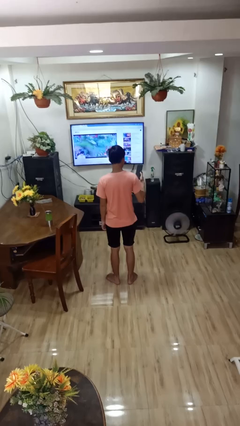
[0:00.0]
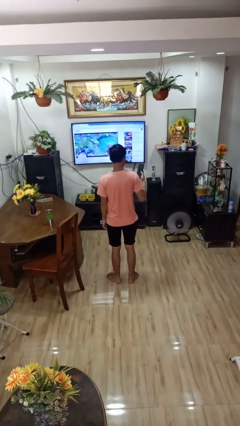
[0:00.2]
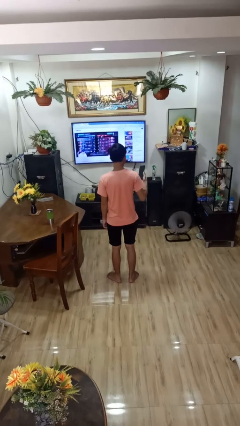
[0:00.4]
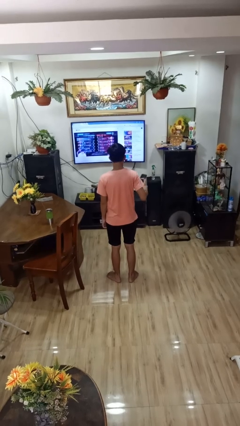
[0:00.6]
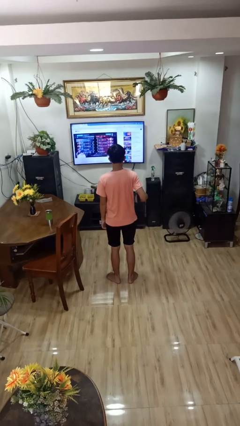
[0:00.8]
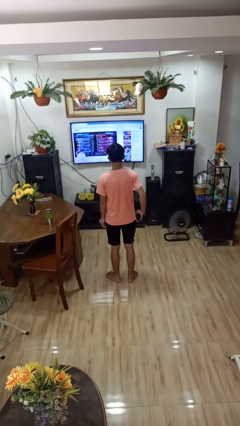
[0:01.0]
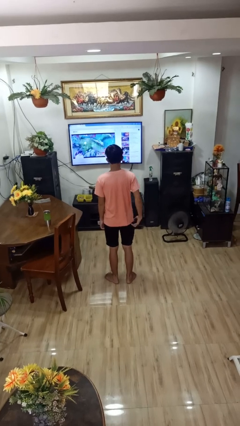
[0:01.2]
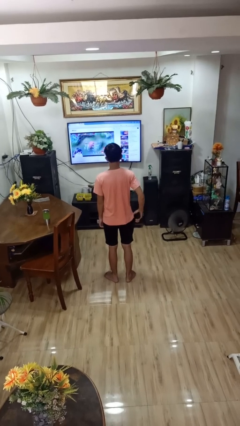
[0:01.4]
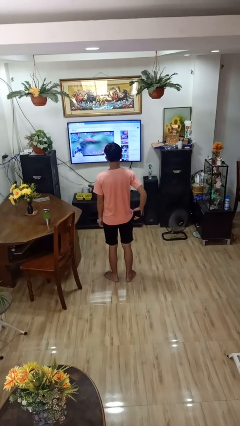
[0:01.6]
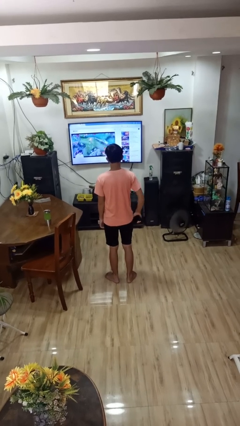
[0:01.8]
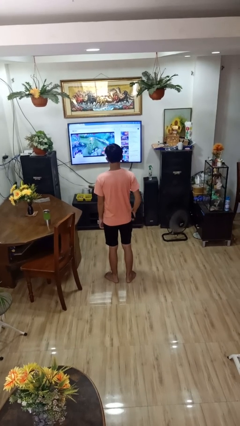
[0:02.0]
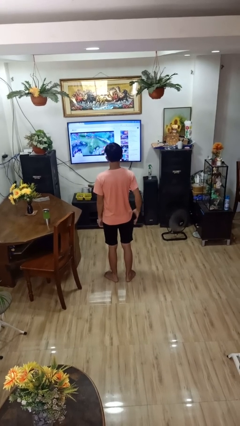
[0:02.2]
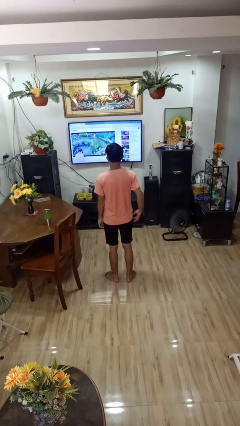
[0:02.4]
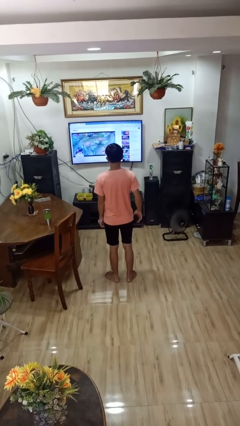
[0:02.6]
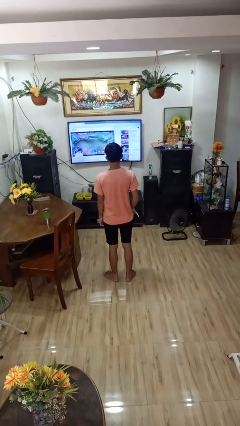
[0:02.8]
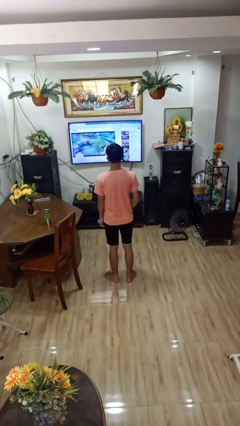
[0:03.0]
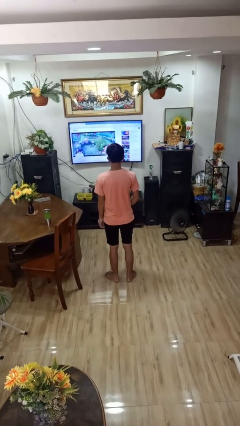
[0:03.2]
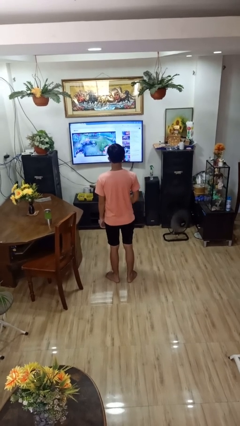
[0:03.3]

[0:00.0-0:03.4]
person puts phone into pocket

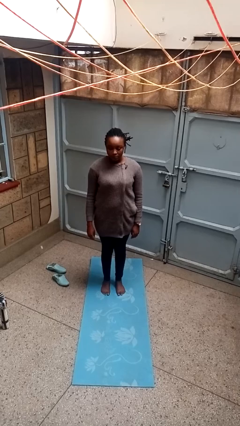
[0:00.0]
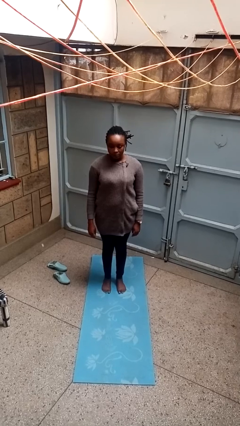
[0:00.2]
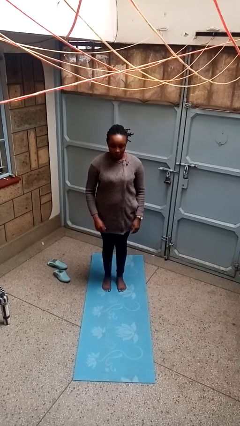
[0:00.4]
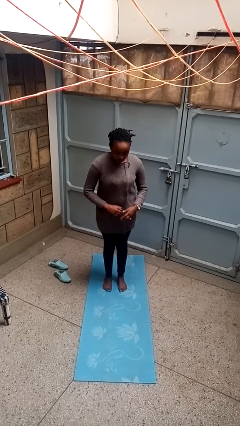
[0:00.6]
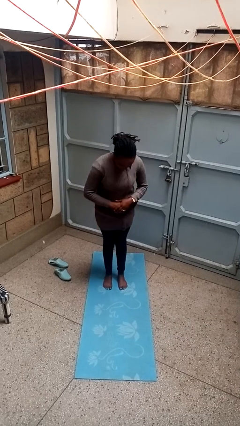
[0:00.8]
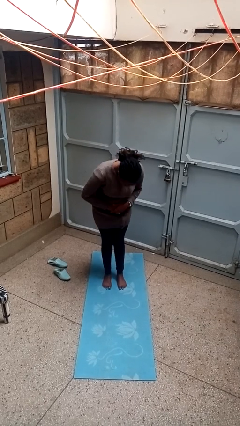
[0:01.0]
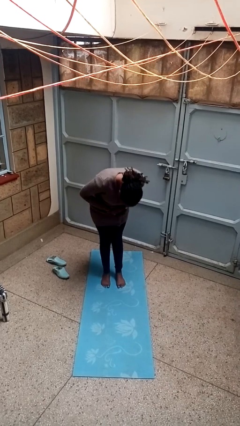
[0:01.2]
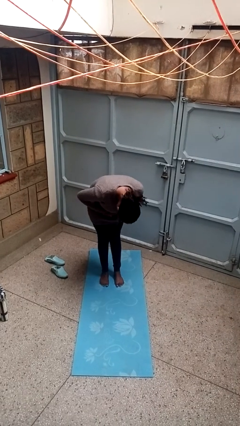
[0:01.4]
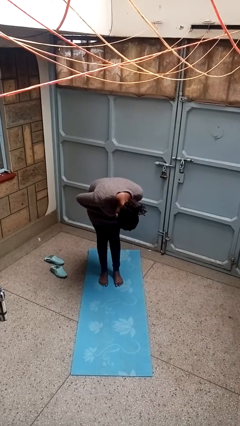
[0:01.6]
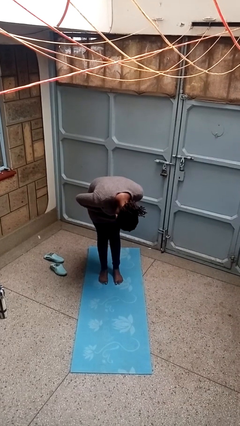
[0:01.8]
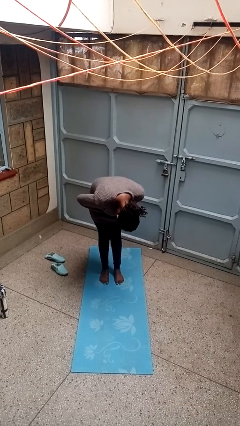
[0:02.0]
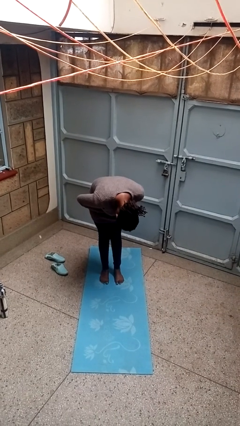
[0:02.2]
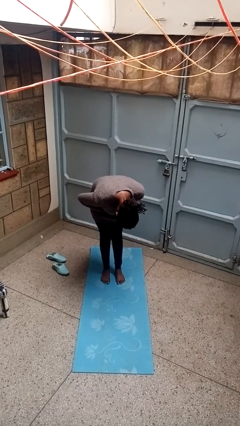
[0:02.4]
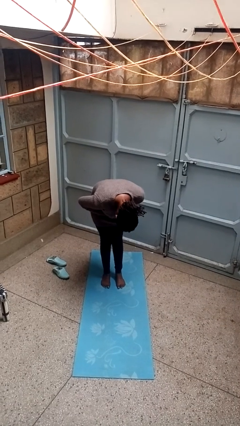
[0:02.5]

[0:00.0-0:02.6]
person bows

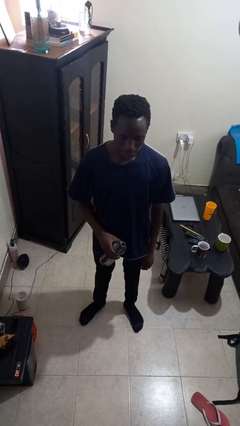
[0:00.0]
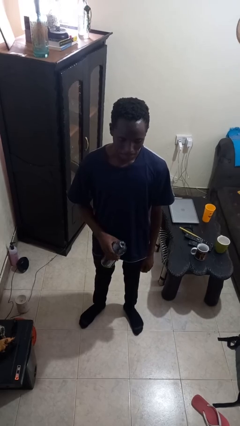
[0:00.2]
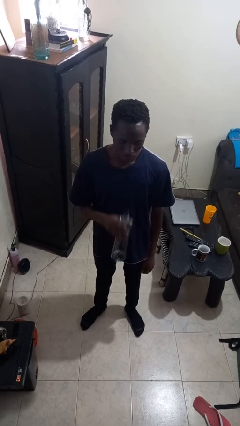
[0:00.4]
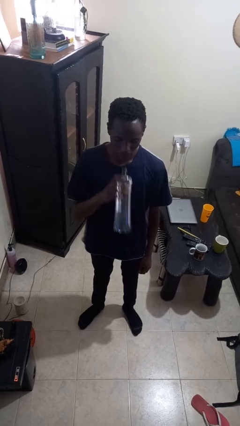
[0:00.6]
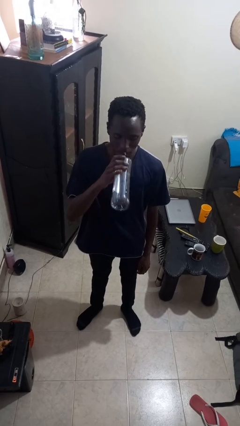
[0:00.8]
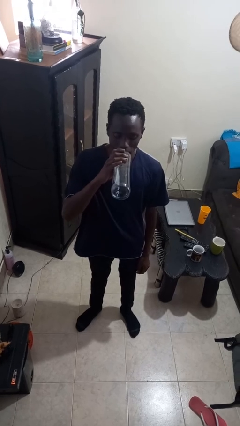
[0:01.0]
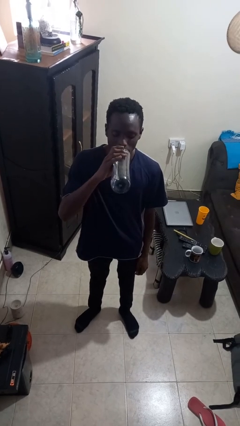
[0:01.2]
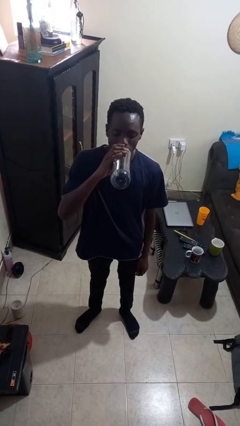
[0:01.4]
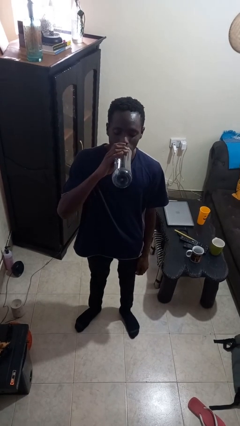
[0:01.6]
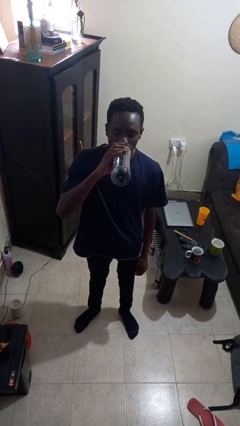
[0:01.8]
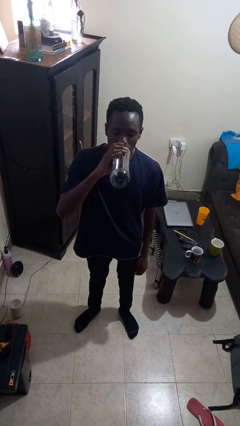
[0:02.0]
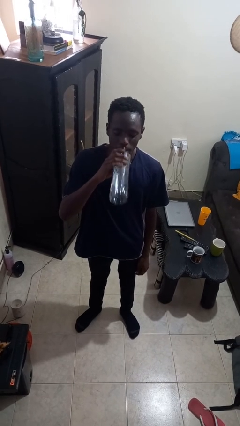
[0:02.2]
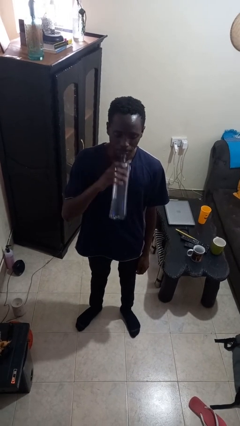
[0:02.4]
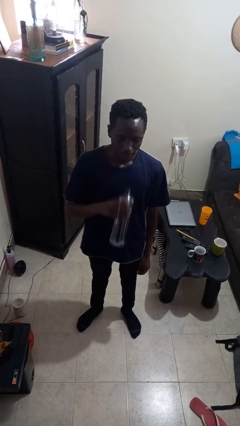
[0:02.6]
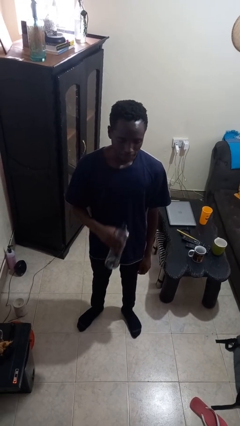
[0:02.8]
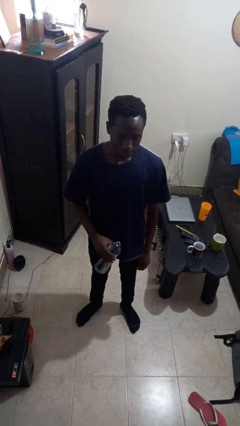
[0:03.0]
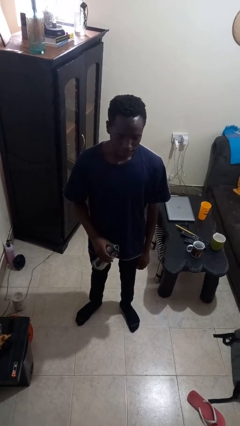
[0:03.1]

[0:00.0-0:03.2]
person drinks from bottle

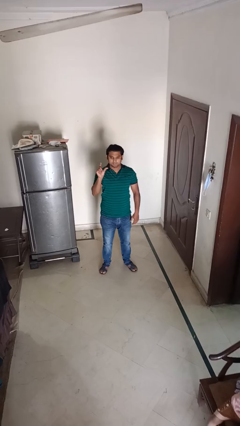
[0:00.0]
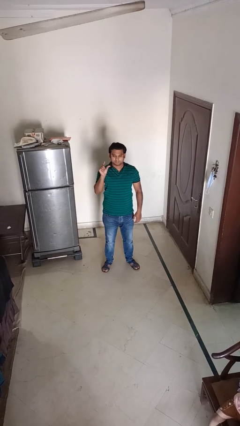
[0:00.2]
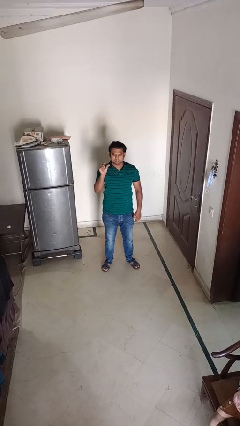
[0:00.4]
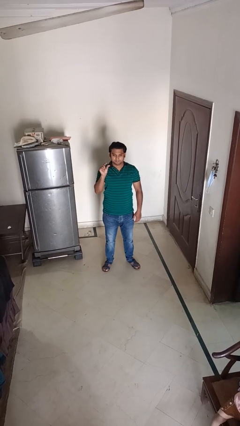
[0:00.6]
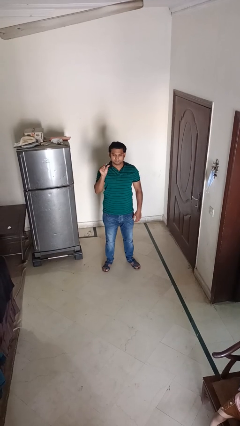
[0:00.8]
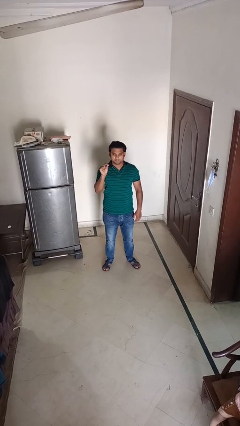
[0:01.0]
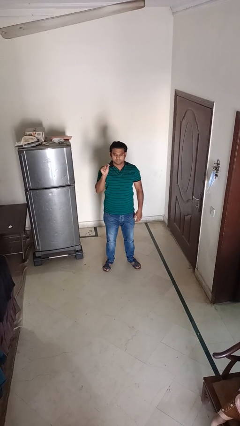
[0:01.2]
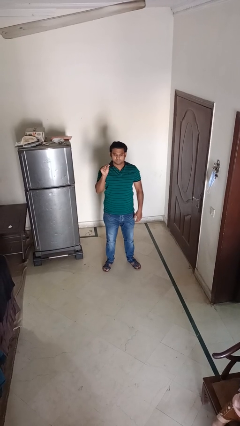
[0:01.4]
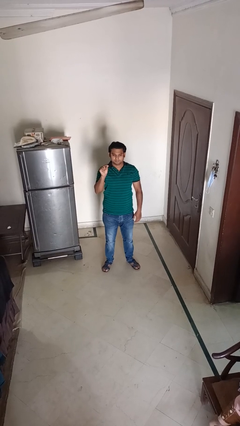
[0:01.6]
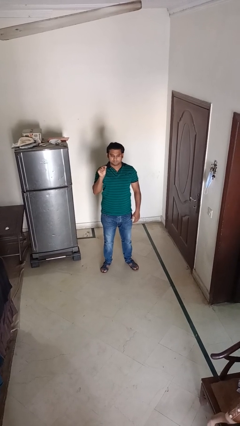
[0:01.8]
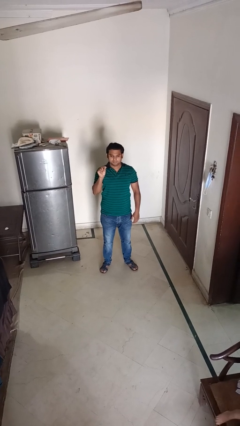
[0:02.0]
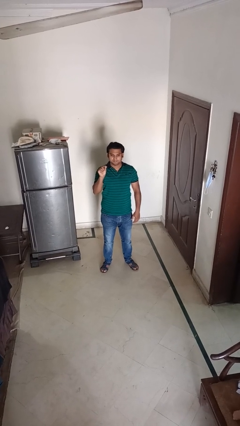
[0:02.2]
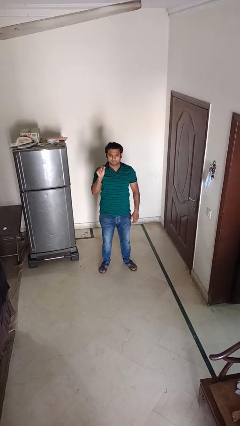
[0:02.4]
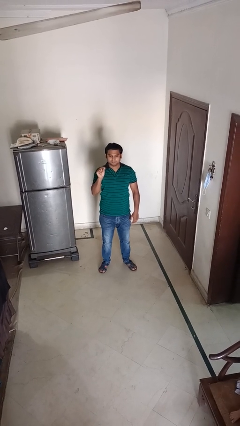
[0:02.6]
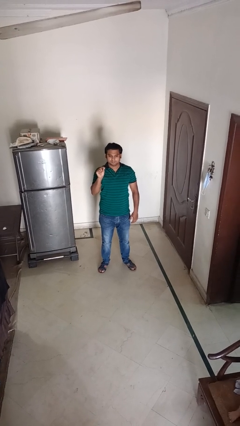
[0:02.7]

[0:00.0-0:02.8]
person gestures zoom in

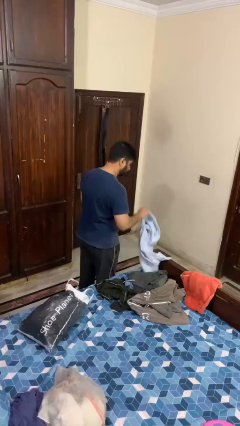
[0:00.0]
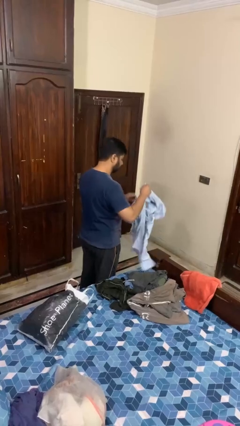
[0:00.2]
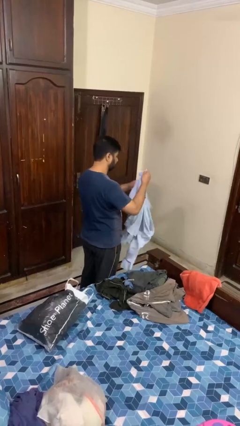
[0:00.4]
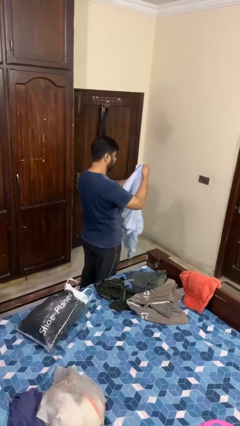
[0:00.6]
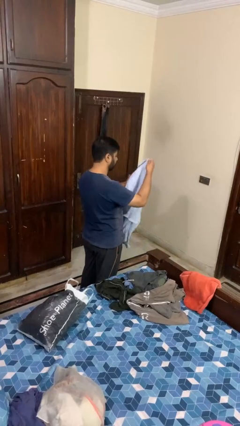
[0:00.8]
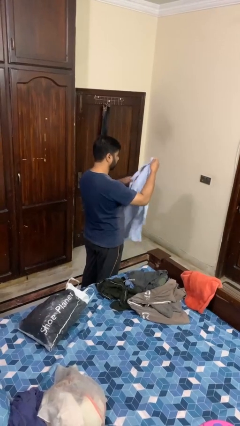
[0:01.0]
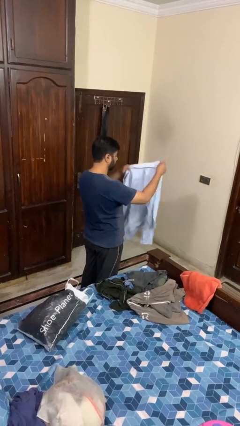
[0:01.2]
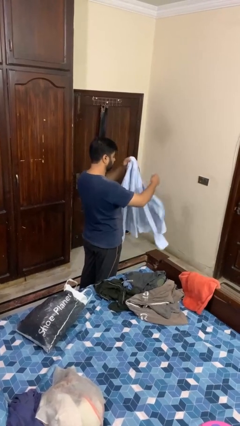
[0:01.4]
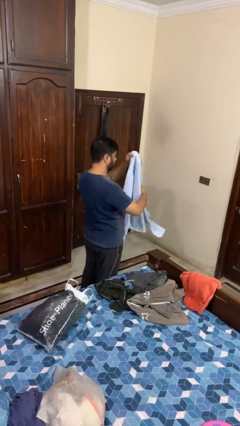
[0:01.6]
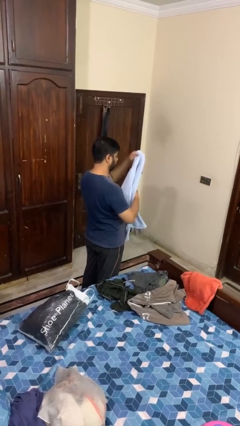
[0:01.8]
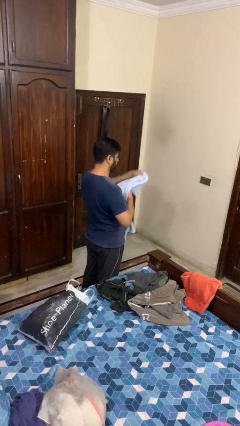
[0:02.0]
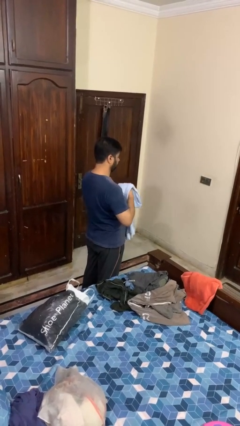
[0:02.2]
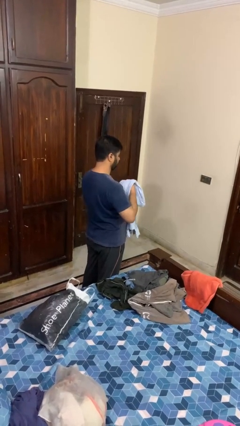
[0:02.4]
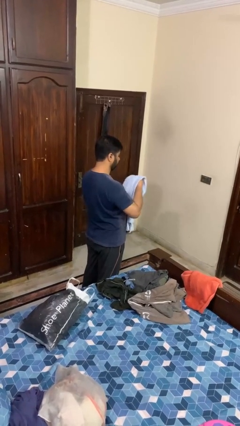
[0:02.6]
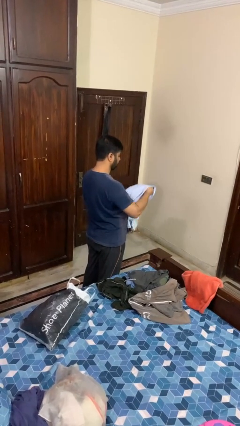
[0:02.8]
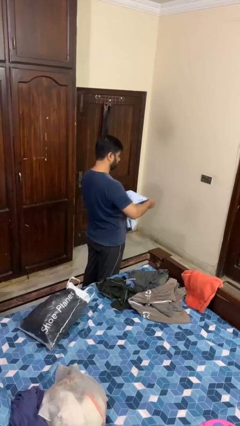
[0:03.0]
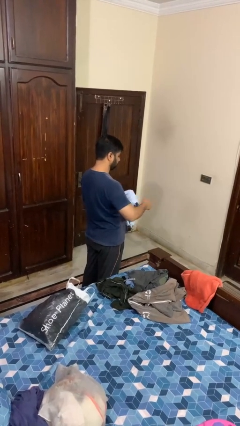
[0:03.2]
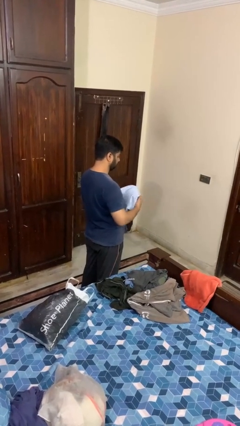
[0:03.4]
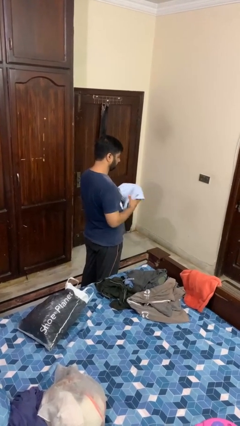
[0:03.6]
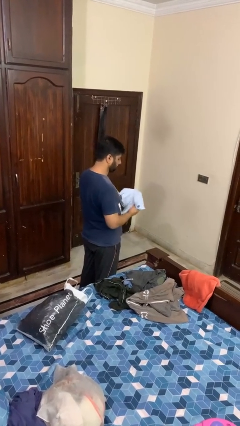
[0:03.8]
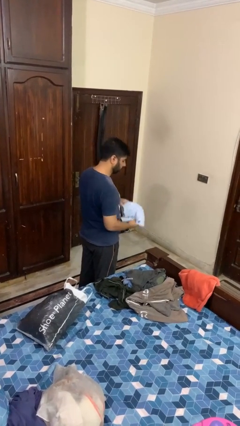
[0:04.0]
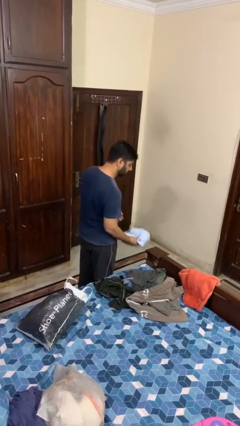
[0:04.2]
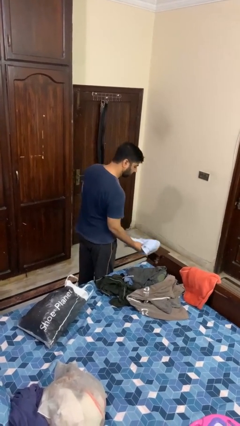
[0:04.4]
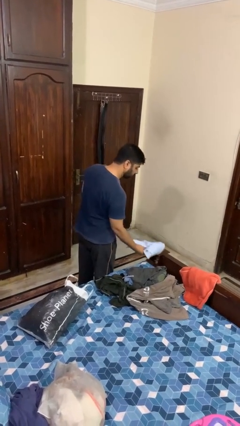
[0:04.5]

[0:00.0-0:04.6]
person folds shirt

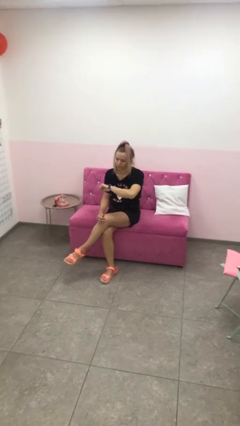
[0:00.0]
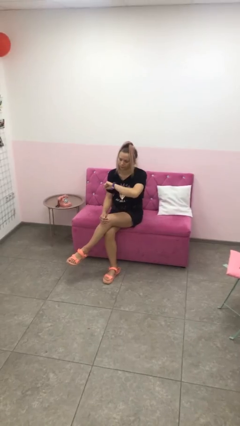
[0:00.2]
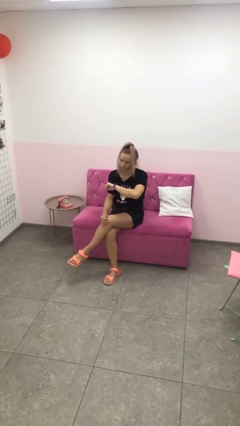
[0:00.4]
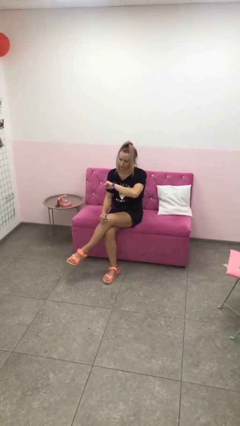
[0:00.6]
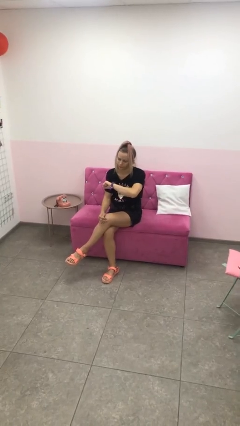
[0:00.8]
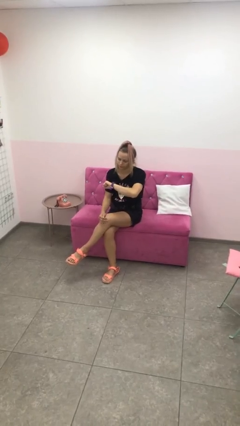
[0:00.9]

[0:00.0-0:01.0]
person looks at wristwatch

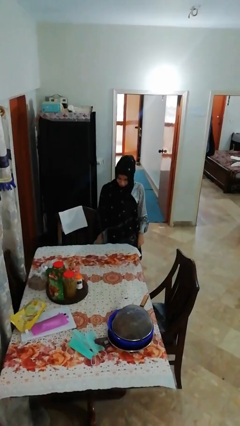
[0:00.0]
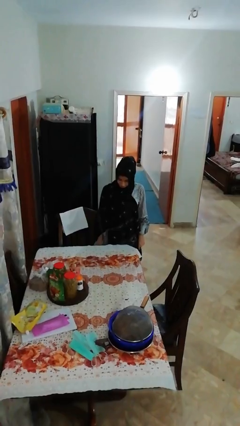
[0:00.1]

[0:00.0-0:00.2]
person cleans table with rag
